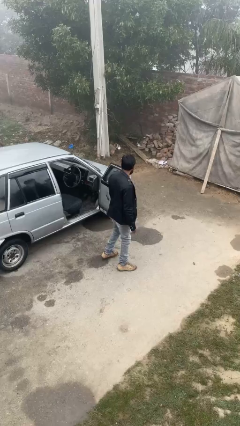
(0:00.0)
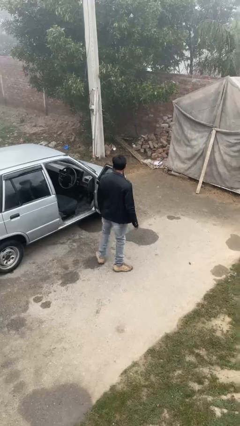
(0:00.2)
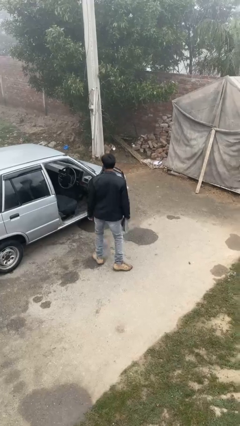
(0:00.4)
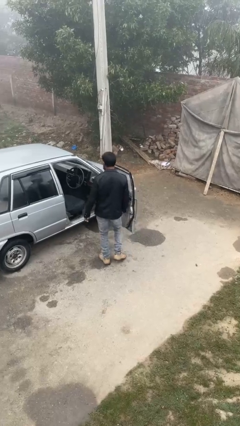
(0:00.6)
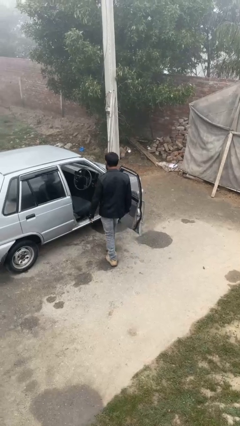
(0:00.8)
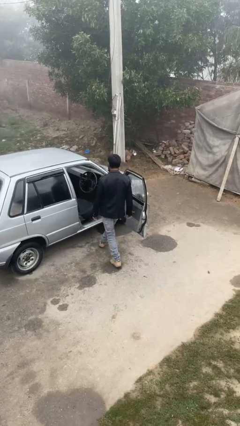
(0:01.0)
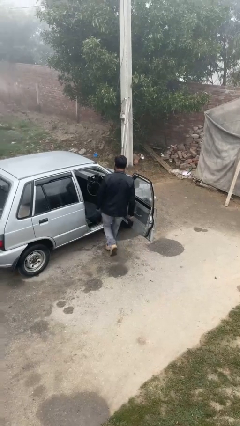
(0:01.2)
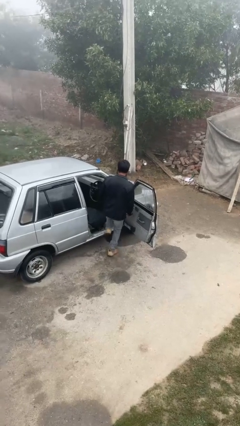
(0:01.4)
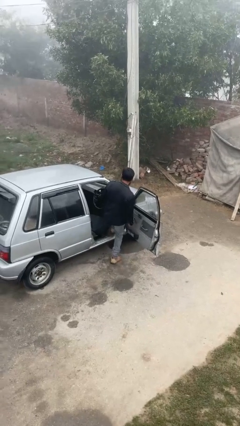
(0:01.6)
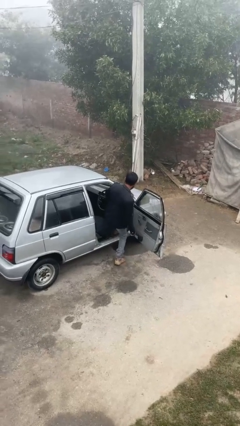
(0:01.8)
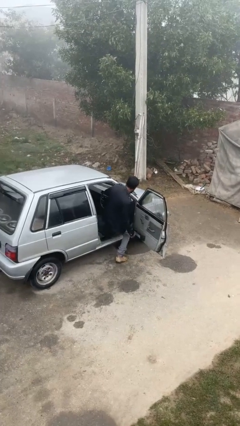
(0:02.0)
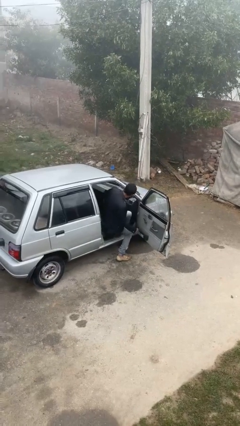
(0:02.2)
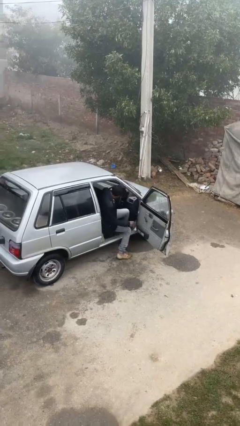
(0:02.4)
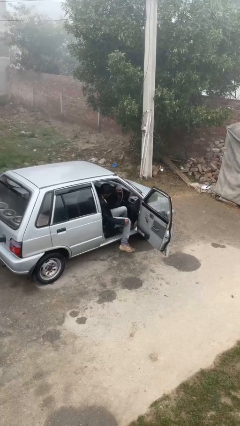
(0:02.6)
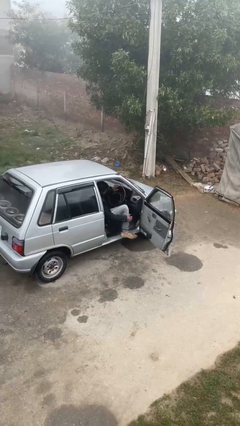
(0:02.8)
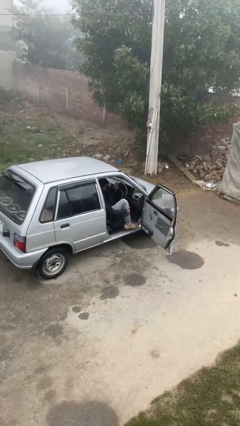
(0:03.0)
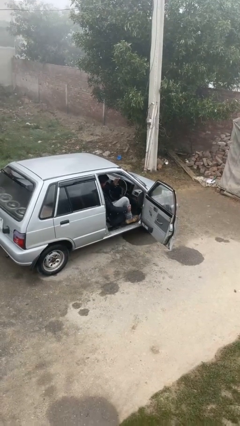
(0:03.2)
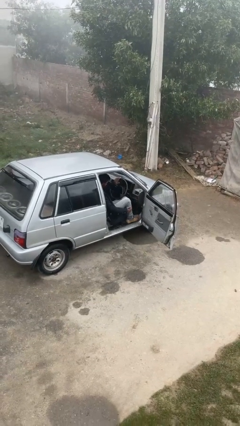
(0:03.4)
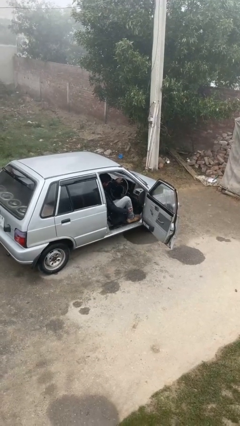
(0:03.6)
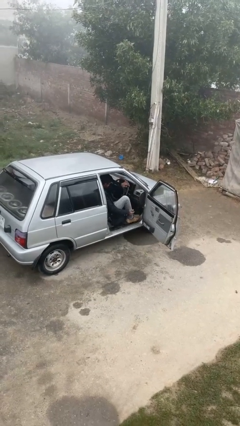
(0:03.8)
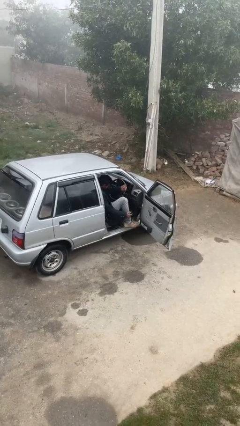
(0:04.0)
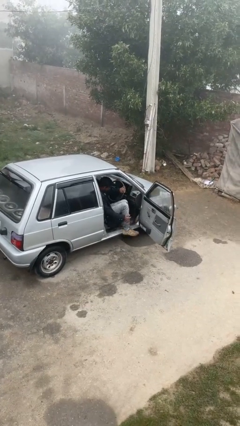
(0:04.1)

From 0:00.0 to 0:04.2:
person enters car

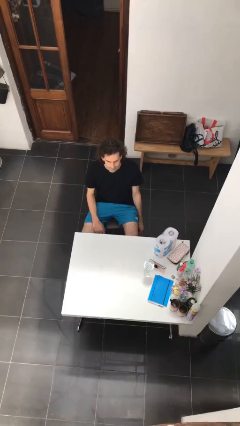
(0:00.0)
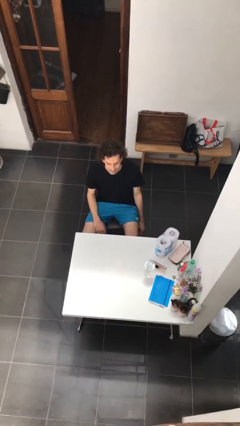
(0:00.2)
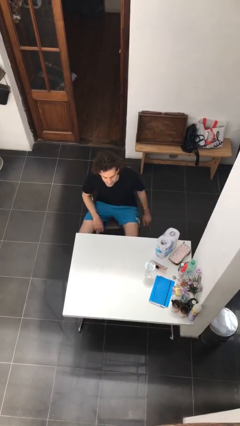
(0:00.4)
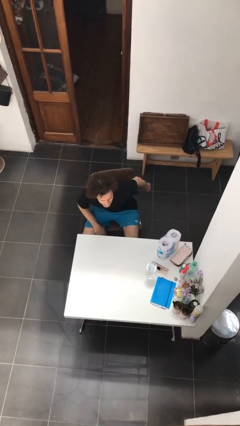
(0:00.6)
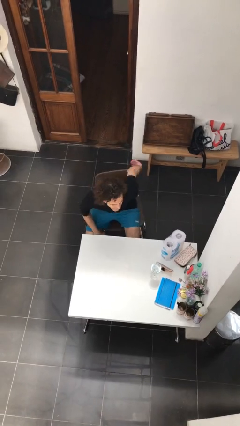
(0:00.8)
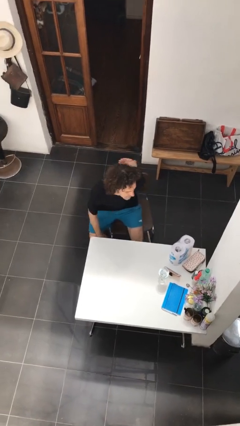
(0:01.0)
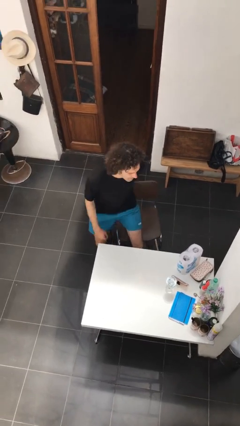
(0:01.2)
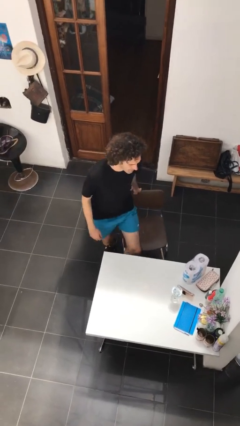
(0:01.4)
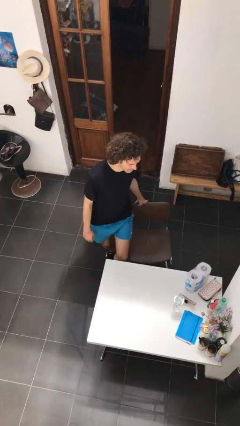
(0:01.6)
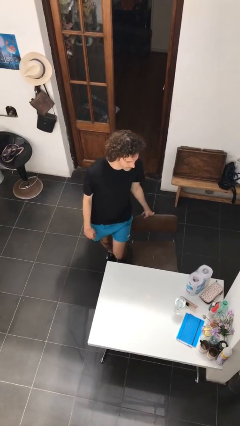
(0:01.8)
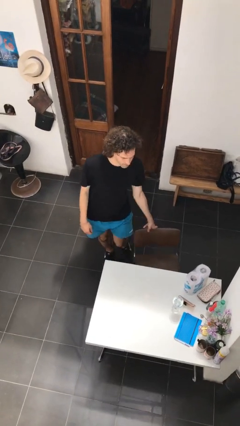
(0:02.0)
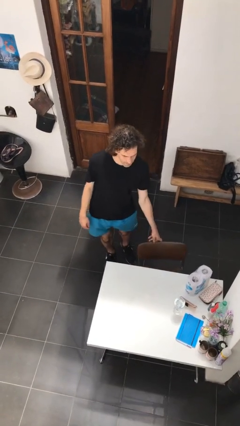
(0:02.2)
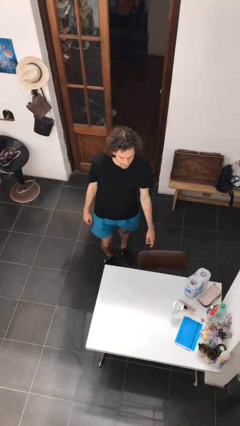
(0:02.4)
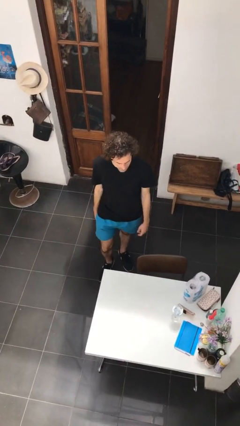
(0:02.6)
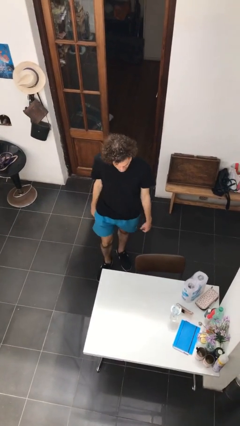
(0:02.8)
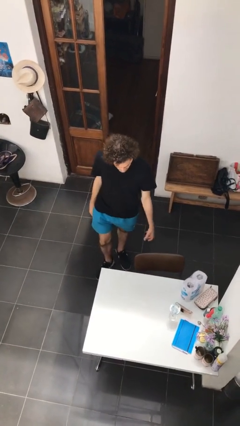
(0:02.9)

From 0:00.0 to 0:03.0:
person stands up

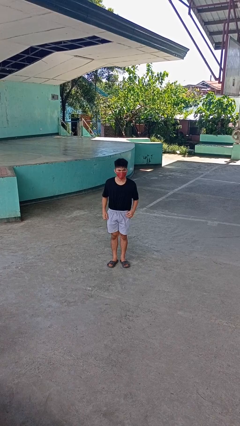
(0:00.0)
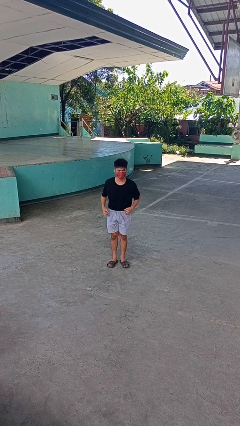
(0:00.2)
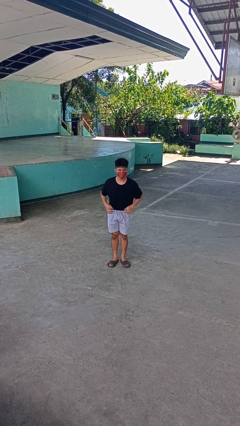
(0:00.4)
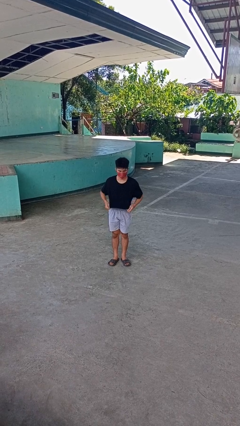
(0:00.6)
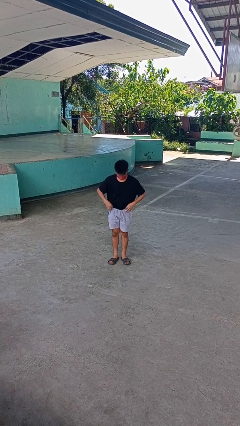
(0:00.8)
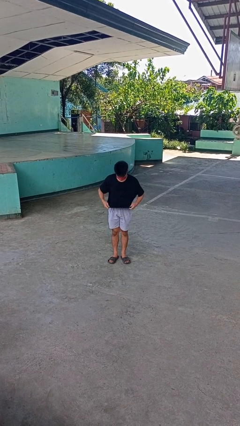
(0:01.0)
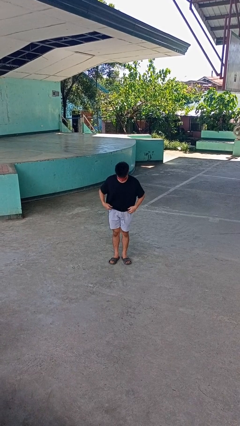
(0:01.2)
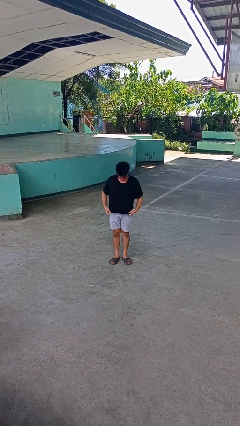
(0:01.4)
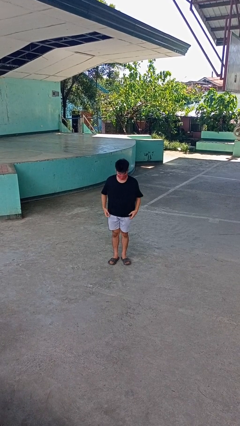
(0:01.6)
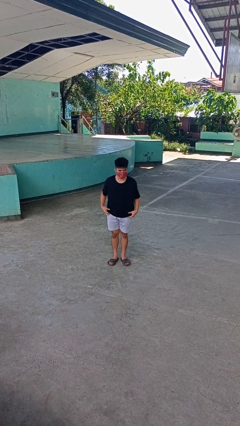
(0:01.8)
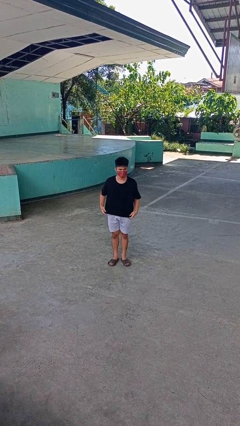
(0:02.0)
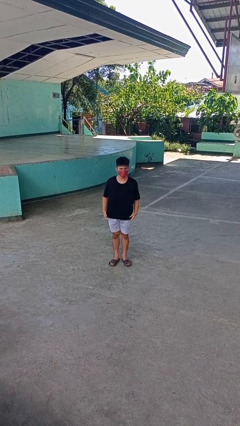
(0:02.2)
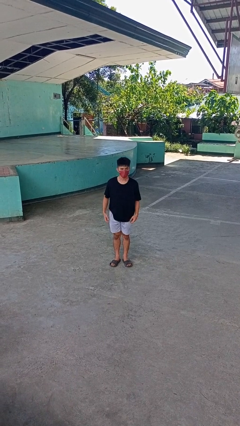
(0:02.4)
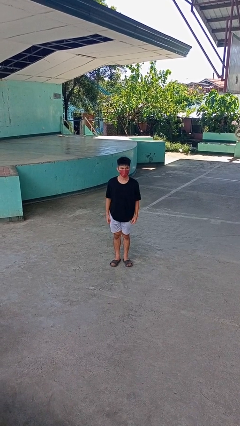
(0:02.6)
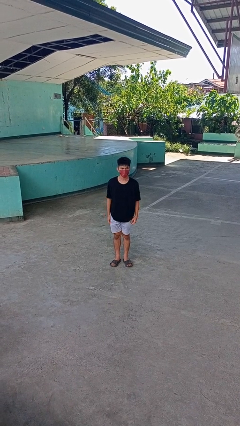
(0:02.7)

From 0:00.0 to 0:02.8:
person untucks shirt

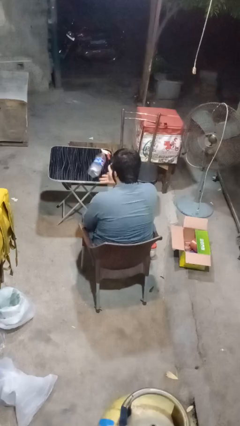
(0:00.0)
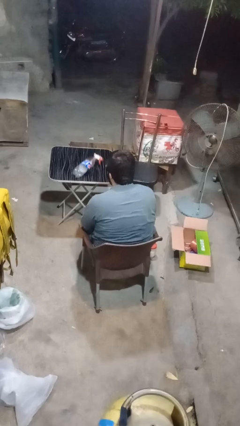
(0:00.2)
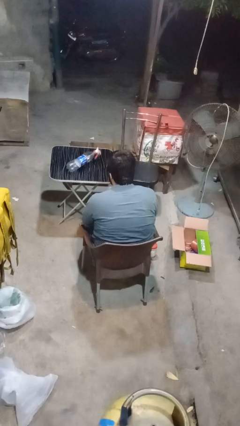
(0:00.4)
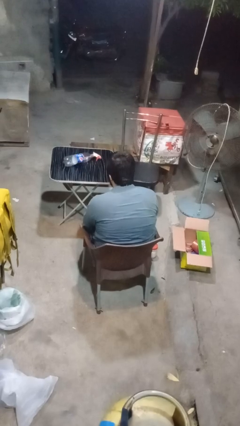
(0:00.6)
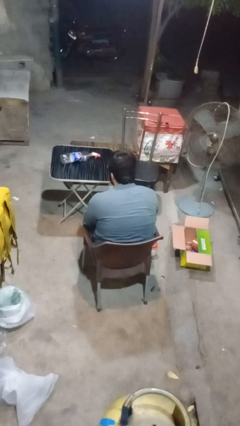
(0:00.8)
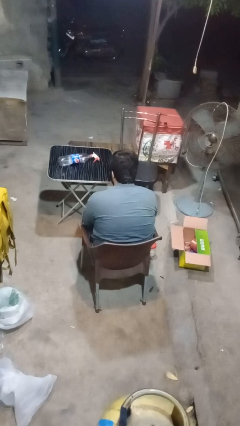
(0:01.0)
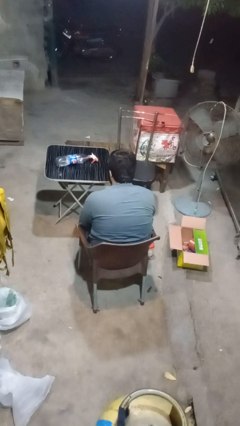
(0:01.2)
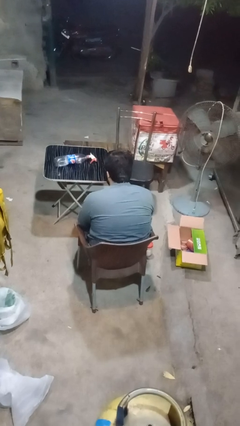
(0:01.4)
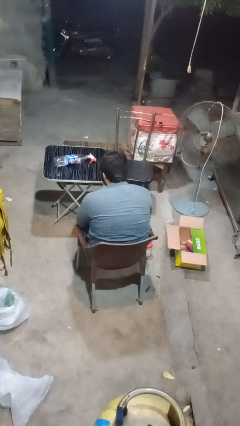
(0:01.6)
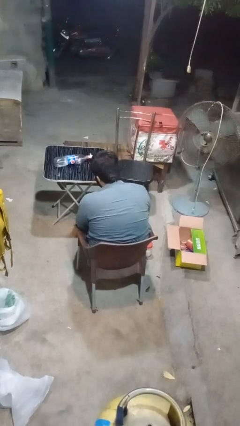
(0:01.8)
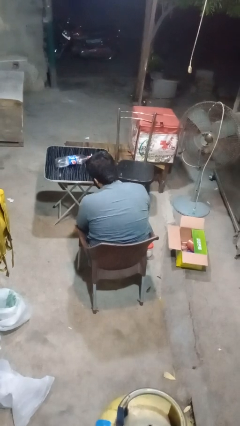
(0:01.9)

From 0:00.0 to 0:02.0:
person throws object on table

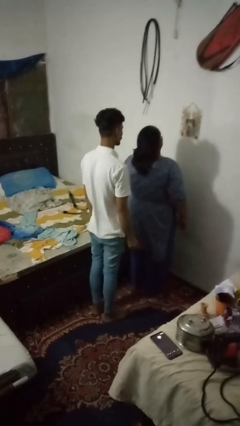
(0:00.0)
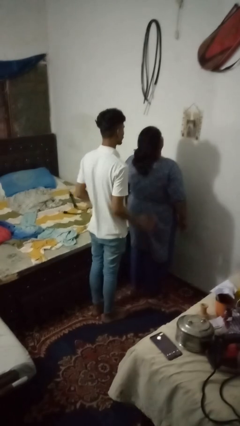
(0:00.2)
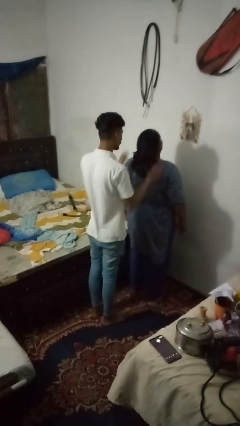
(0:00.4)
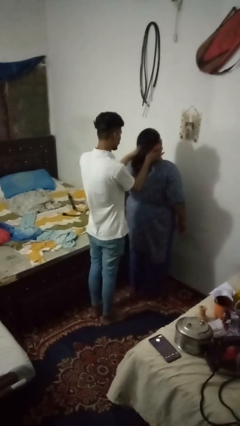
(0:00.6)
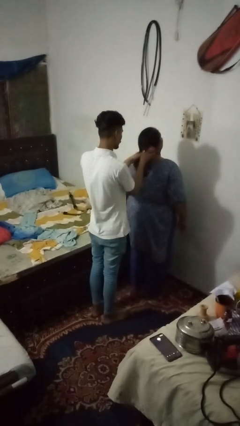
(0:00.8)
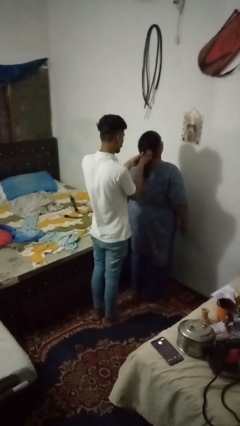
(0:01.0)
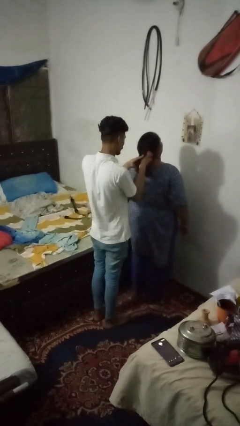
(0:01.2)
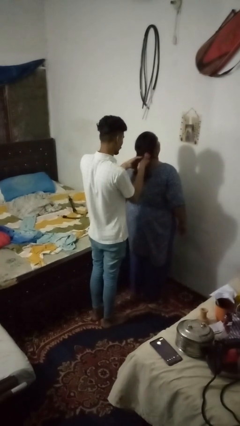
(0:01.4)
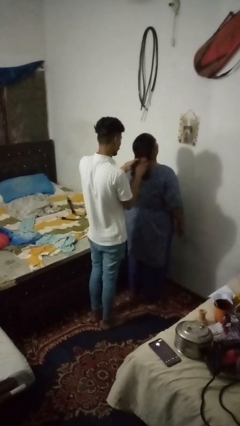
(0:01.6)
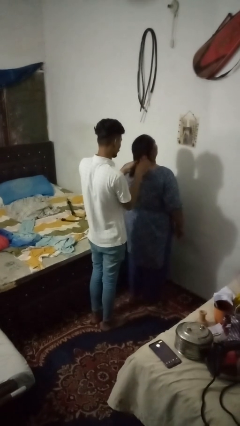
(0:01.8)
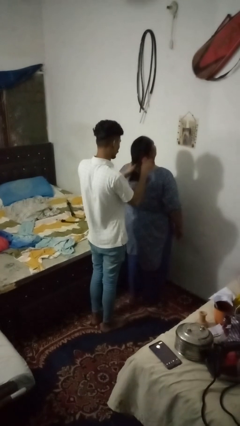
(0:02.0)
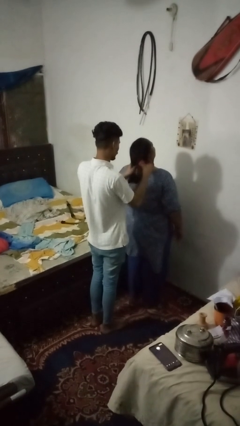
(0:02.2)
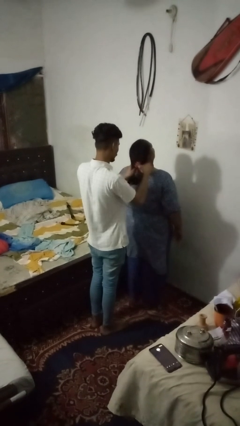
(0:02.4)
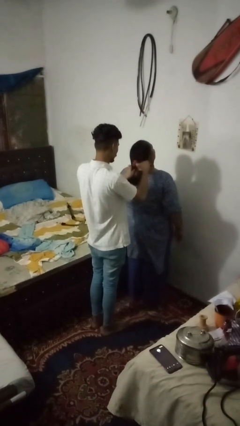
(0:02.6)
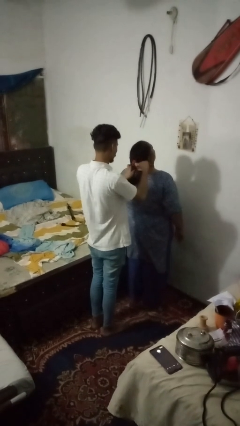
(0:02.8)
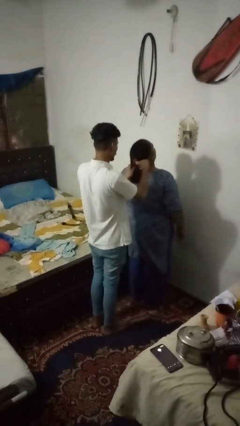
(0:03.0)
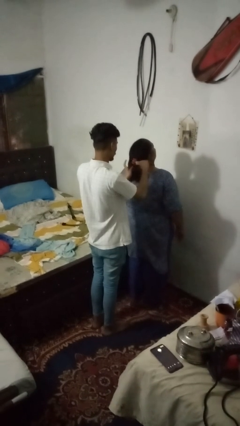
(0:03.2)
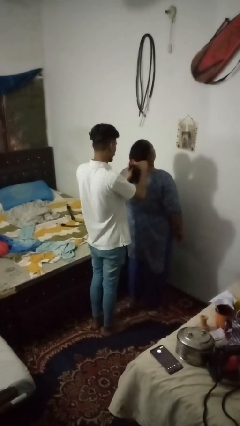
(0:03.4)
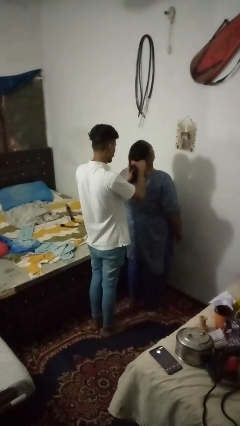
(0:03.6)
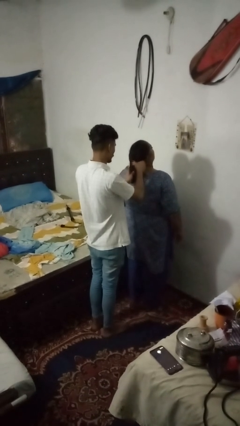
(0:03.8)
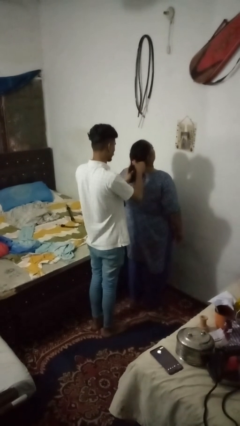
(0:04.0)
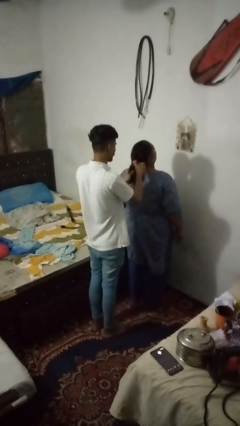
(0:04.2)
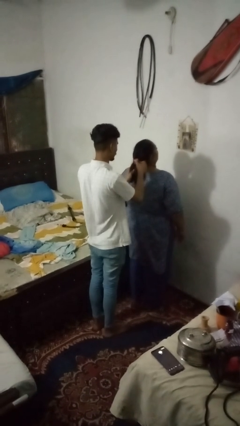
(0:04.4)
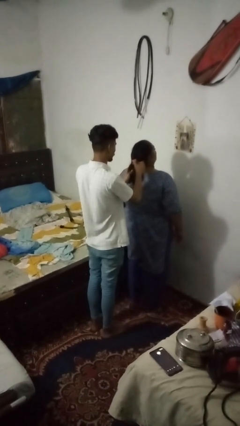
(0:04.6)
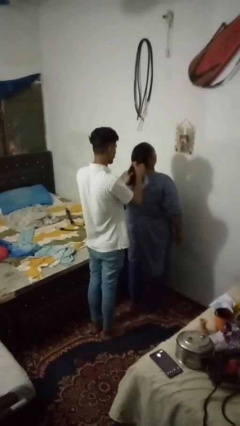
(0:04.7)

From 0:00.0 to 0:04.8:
person braids hair of person

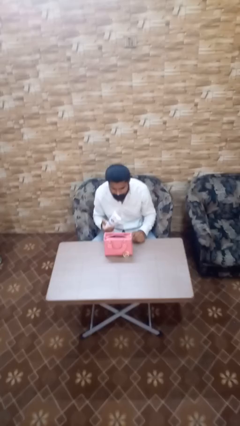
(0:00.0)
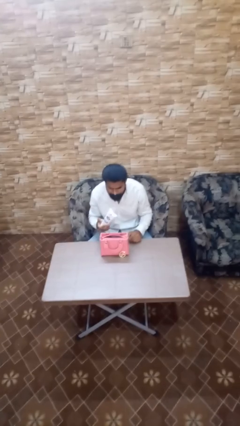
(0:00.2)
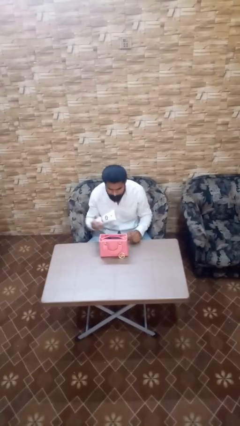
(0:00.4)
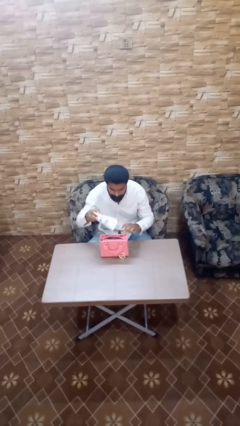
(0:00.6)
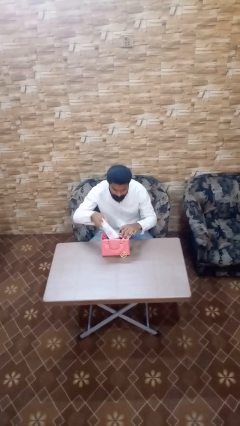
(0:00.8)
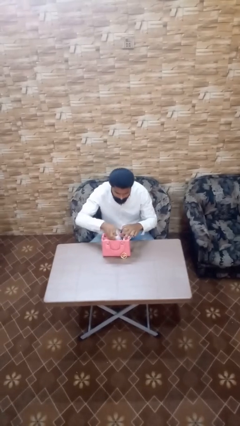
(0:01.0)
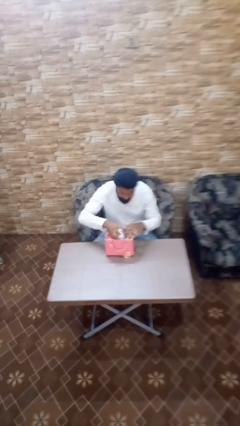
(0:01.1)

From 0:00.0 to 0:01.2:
person puts object into purse
